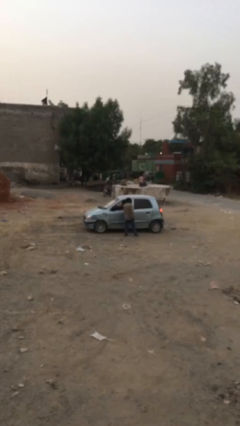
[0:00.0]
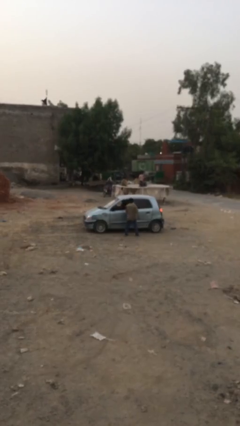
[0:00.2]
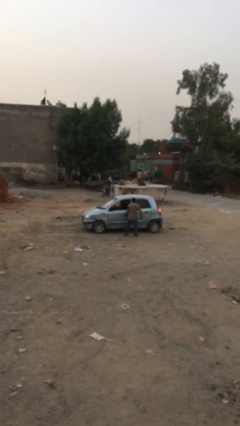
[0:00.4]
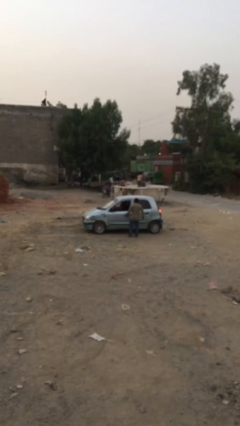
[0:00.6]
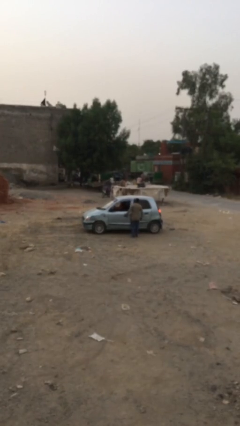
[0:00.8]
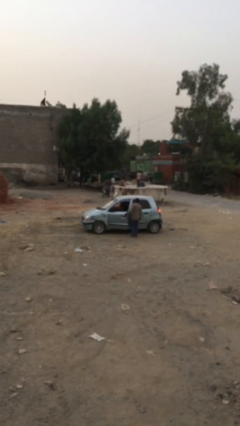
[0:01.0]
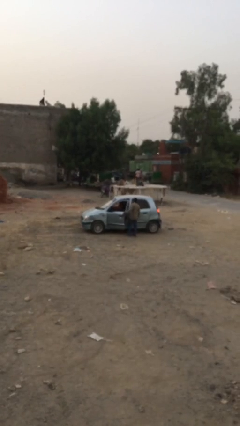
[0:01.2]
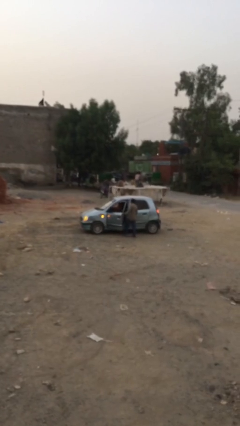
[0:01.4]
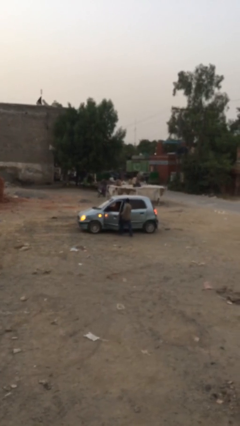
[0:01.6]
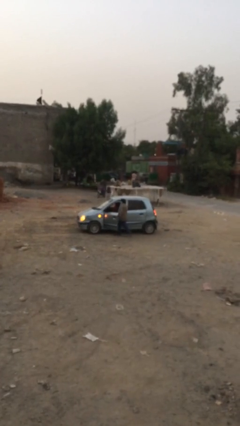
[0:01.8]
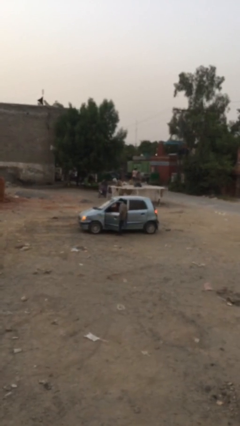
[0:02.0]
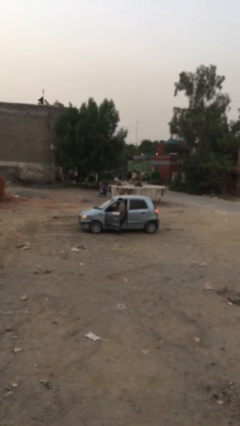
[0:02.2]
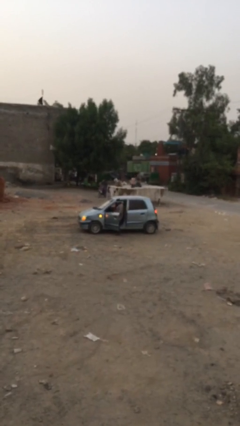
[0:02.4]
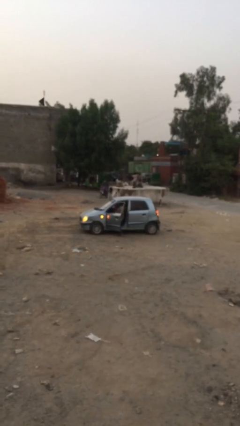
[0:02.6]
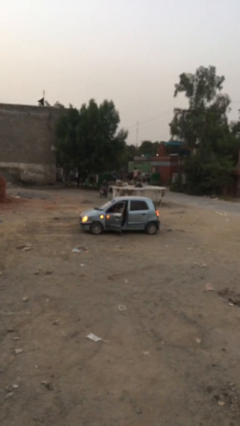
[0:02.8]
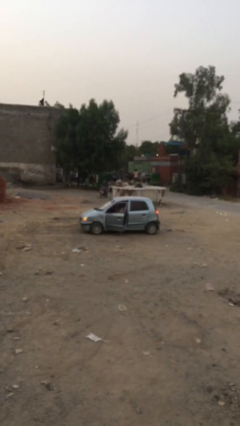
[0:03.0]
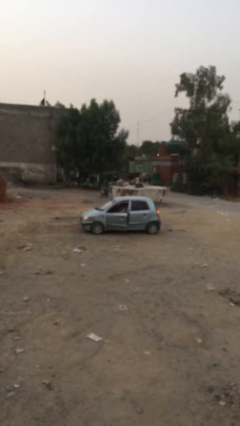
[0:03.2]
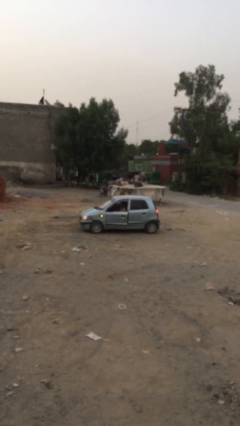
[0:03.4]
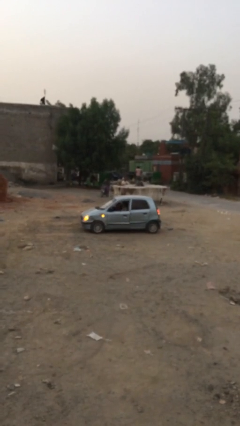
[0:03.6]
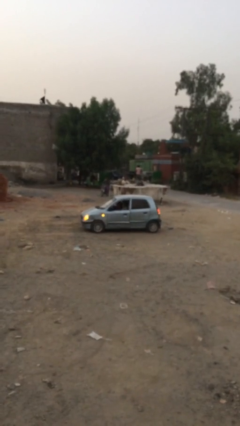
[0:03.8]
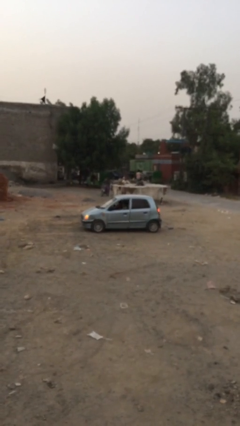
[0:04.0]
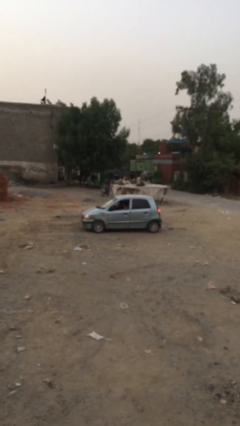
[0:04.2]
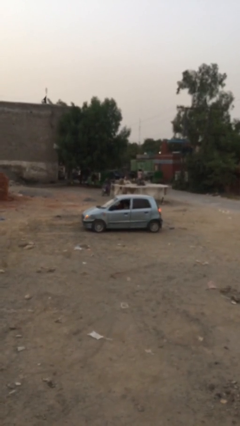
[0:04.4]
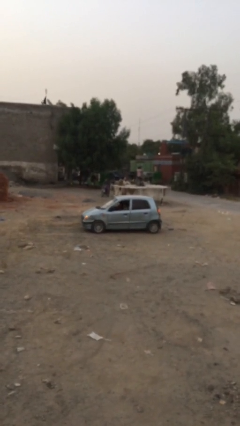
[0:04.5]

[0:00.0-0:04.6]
car picks up person

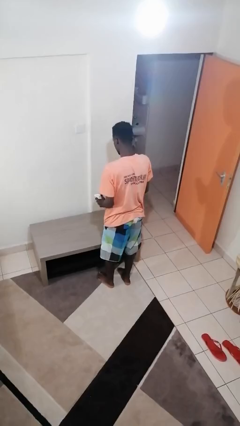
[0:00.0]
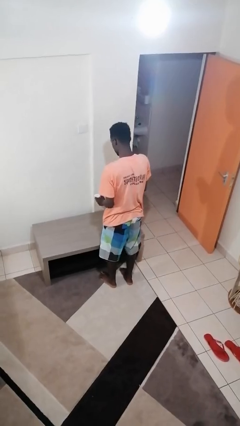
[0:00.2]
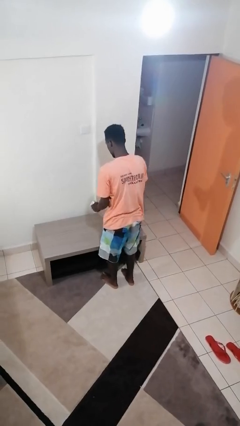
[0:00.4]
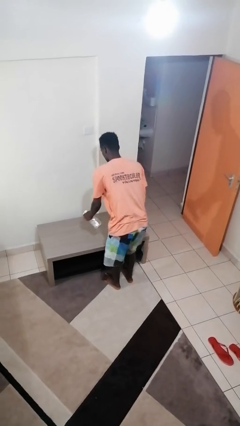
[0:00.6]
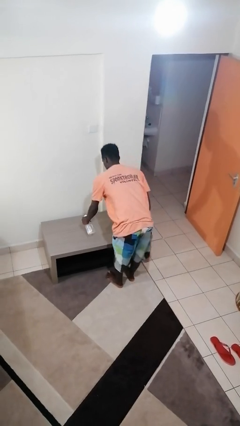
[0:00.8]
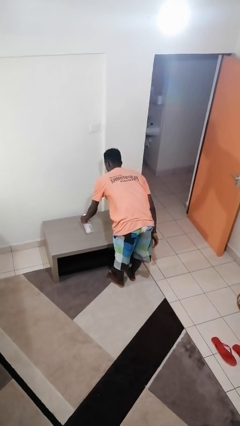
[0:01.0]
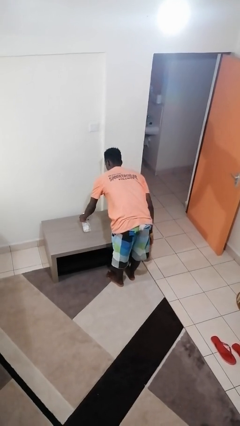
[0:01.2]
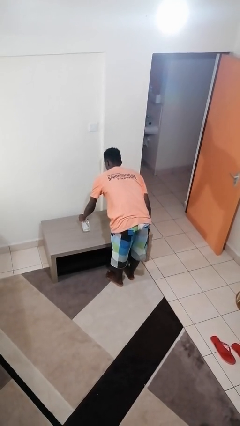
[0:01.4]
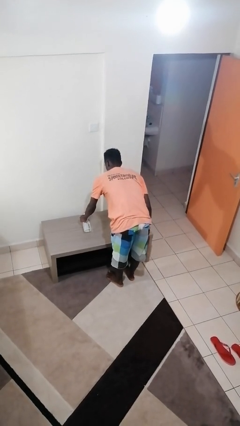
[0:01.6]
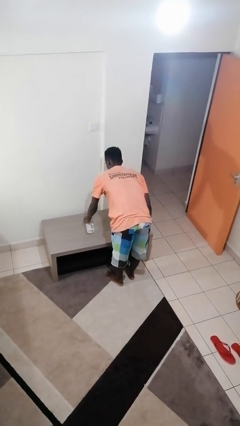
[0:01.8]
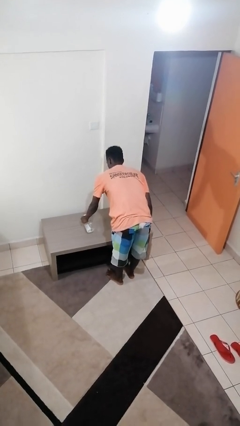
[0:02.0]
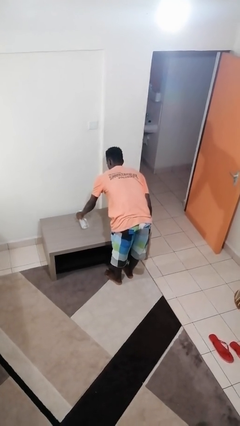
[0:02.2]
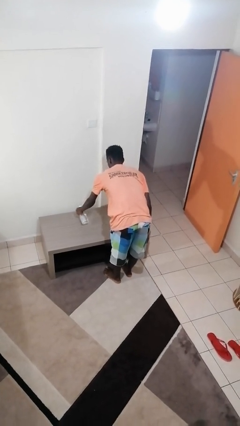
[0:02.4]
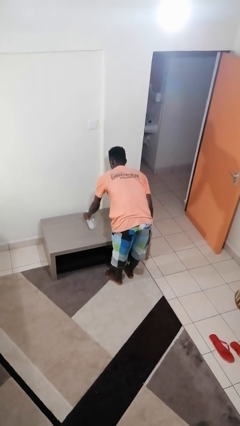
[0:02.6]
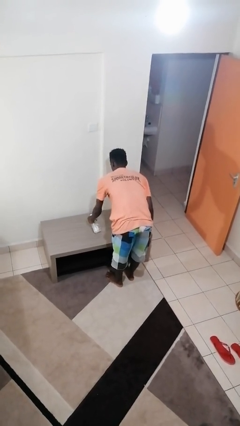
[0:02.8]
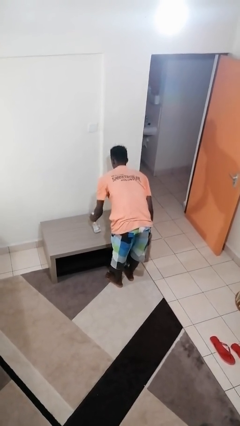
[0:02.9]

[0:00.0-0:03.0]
person sprays from bottle

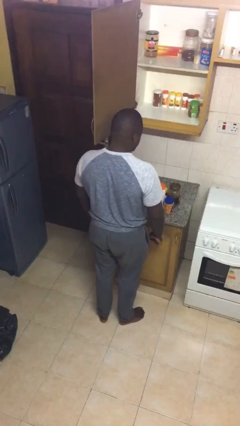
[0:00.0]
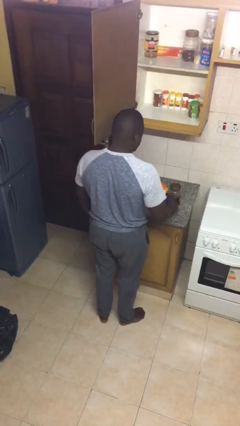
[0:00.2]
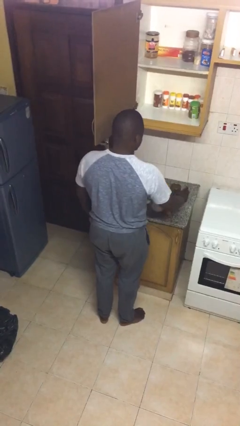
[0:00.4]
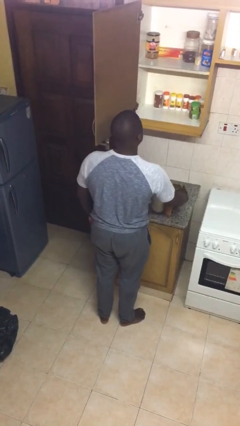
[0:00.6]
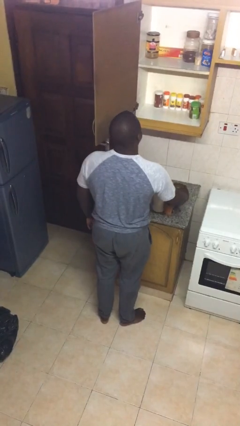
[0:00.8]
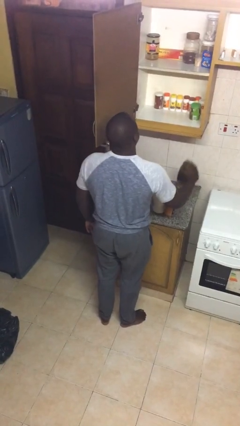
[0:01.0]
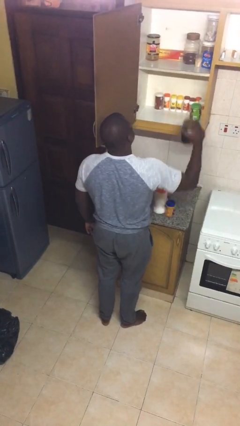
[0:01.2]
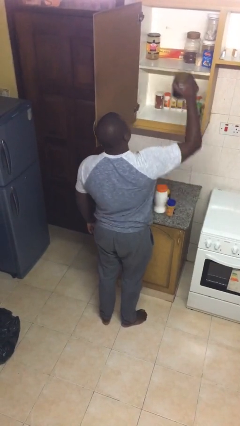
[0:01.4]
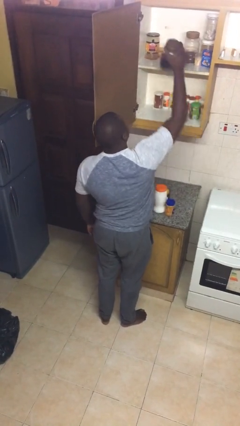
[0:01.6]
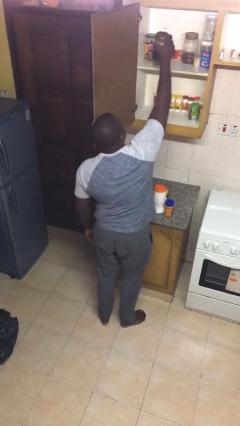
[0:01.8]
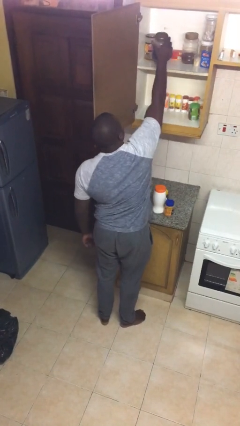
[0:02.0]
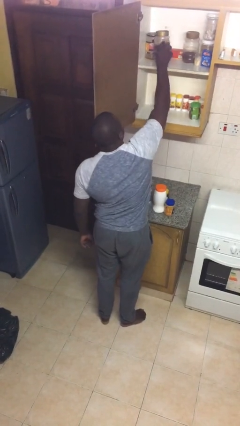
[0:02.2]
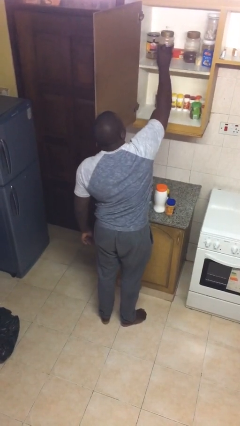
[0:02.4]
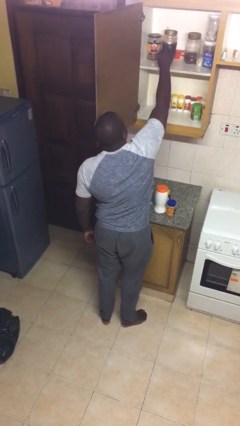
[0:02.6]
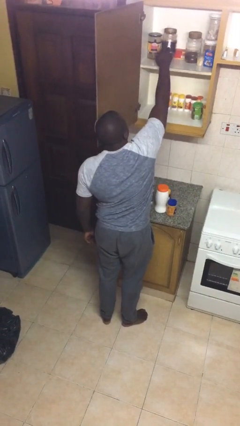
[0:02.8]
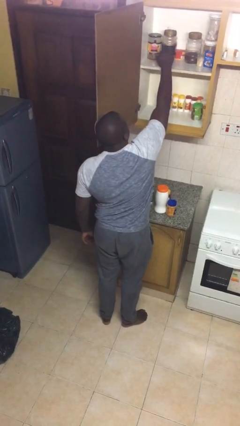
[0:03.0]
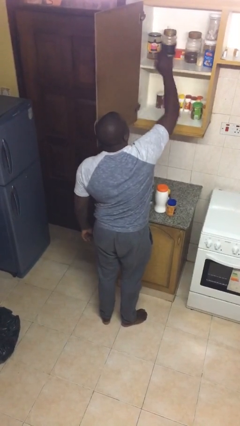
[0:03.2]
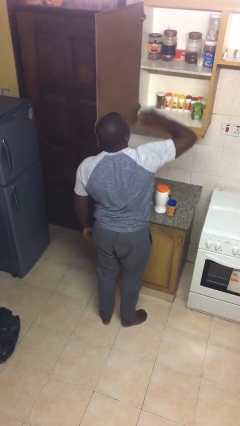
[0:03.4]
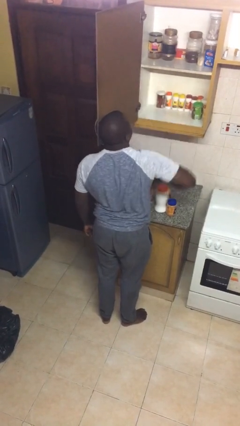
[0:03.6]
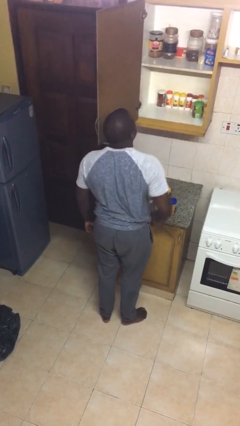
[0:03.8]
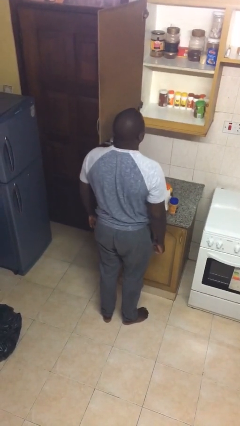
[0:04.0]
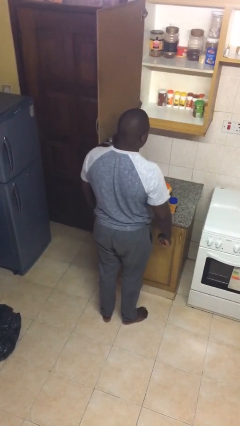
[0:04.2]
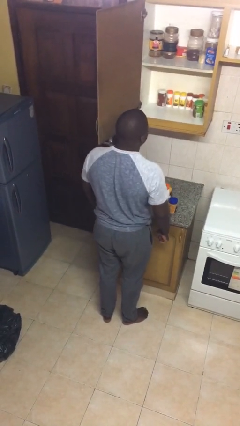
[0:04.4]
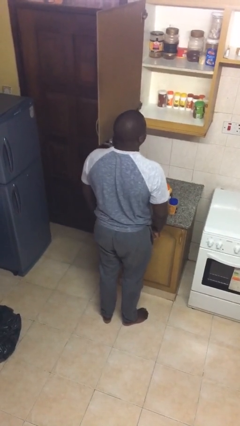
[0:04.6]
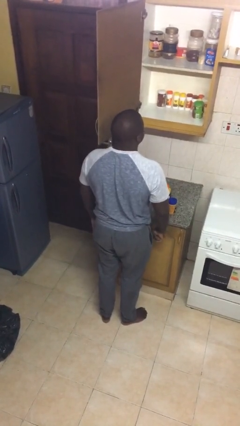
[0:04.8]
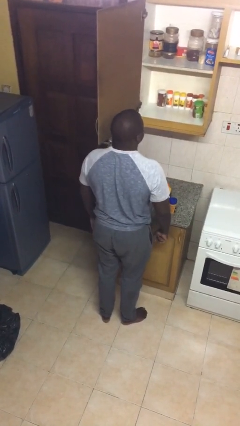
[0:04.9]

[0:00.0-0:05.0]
person puts object in cabinet

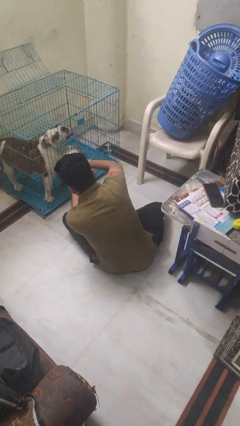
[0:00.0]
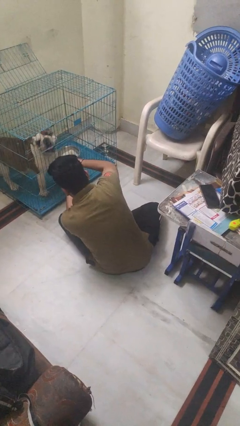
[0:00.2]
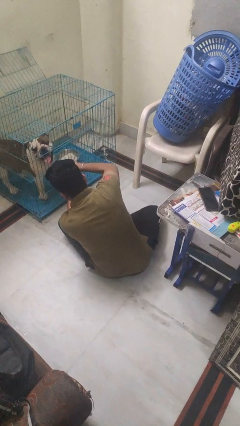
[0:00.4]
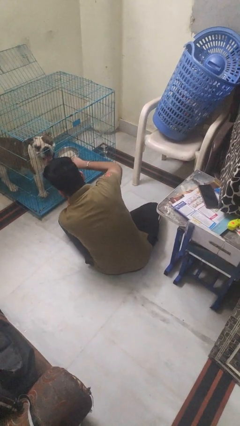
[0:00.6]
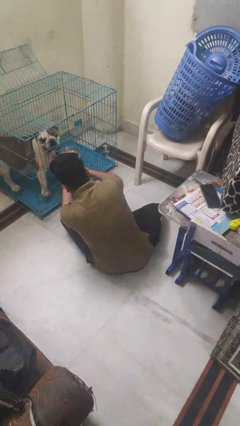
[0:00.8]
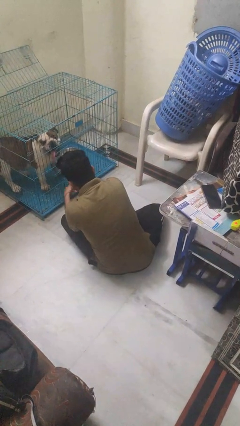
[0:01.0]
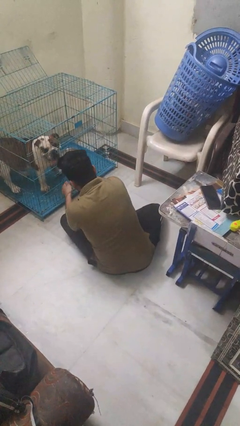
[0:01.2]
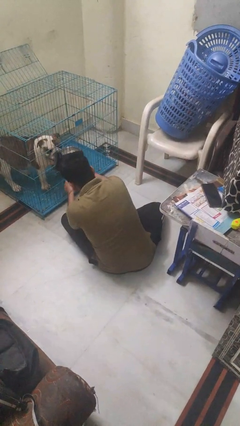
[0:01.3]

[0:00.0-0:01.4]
person uncrates dog

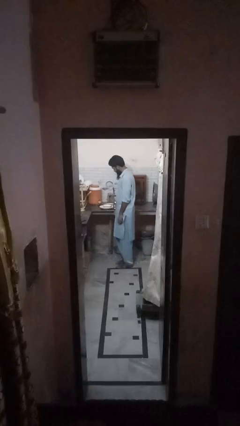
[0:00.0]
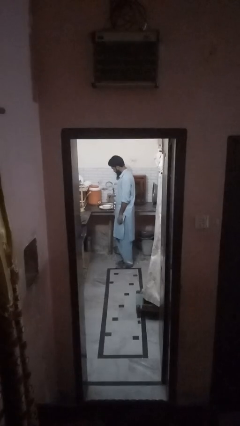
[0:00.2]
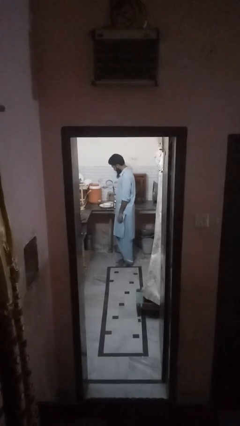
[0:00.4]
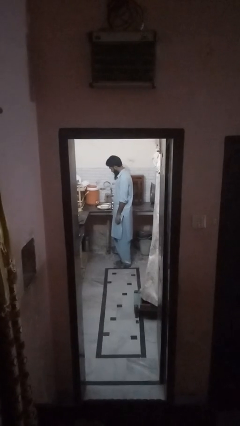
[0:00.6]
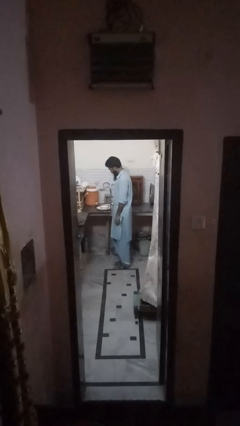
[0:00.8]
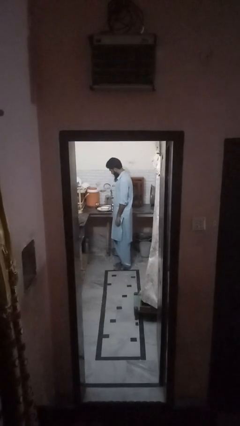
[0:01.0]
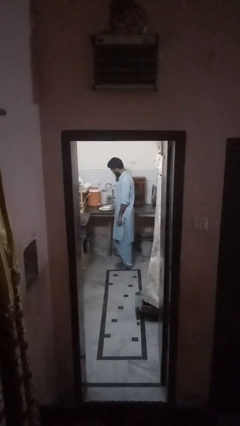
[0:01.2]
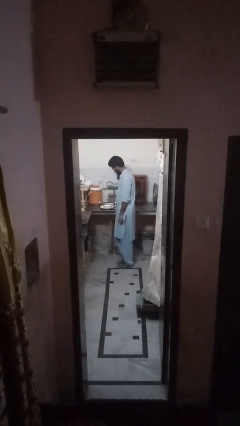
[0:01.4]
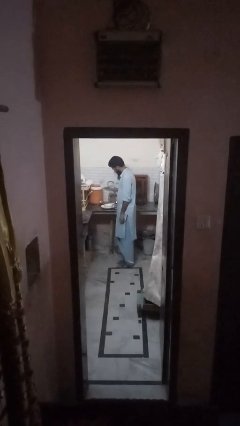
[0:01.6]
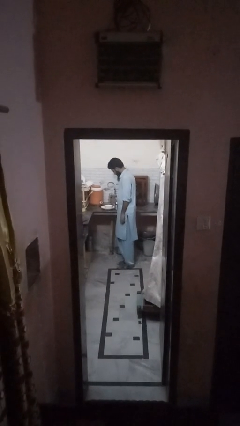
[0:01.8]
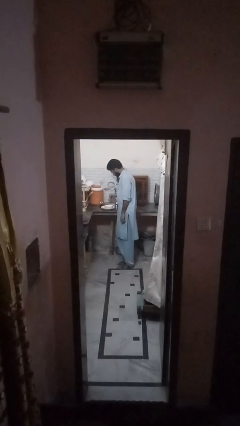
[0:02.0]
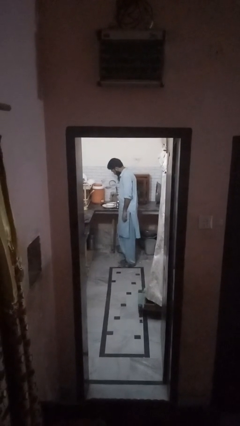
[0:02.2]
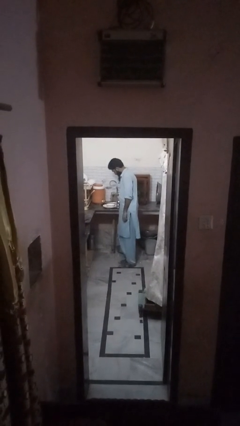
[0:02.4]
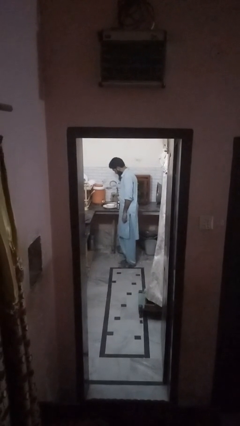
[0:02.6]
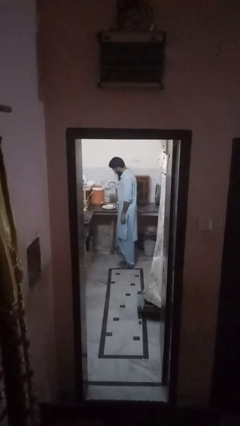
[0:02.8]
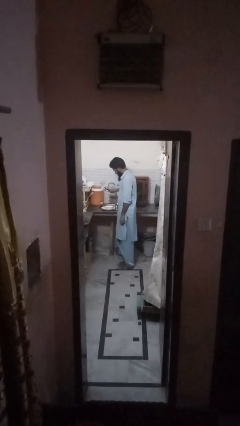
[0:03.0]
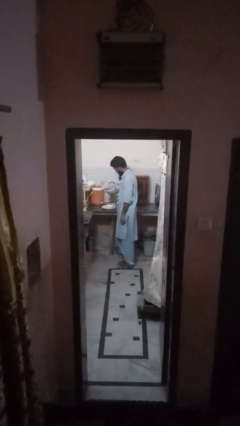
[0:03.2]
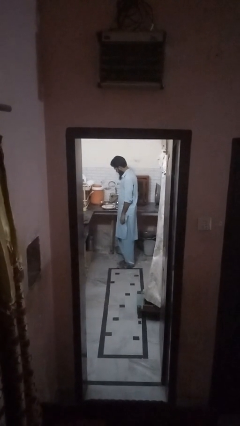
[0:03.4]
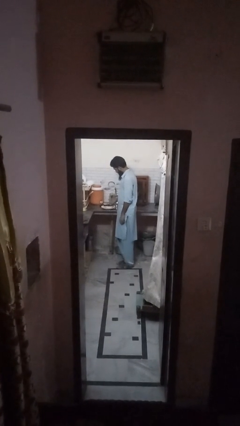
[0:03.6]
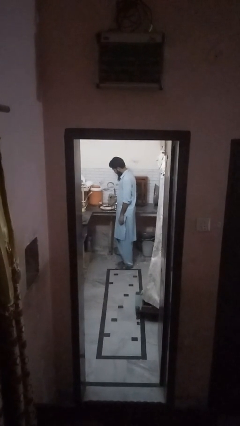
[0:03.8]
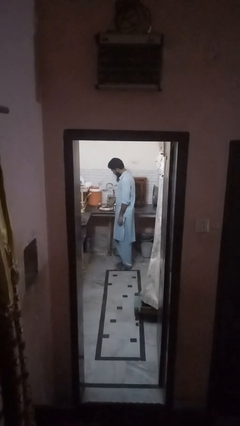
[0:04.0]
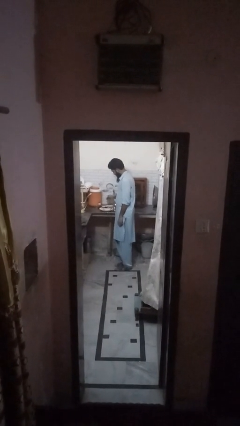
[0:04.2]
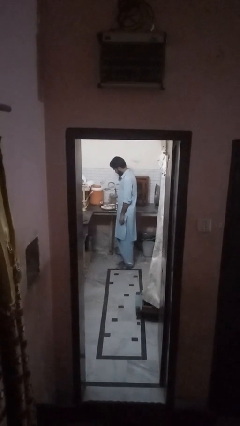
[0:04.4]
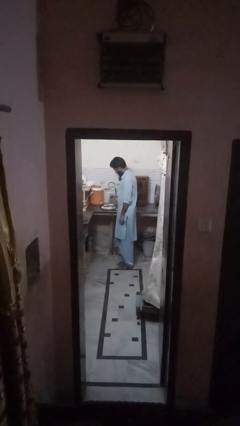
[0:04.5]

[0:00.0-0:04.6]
person unloads dishwasher
